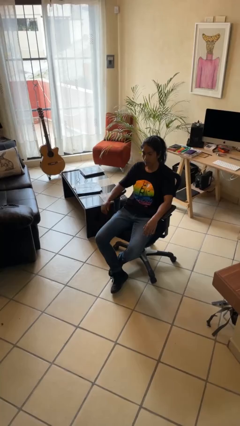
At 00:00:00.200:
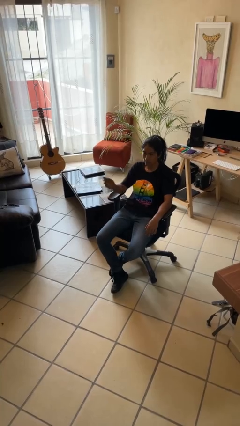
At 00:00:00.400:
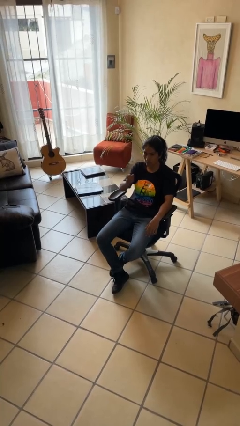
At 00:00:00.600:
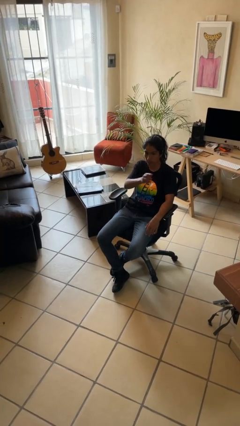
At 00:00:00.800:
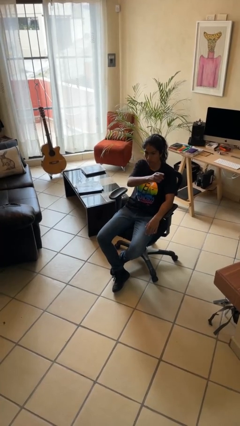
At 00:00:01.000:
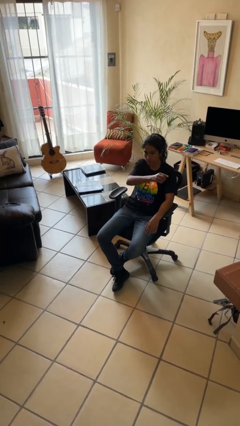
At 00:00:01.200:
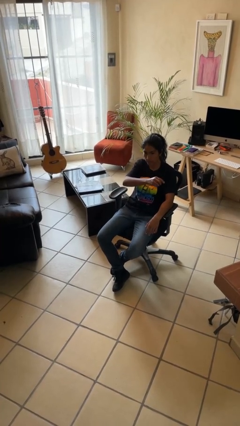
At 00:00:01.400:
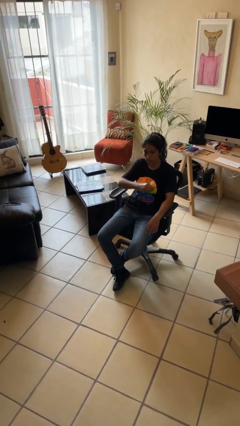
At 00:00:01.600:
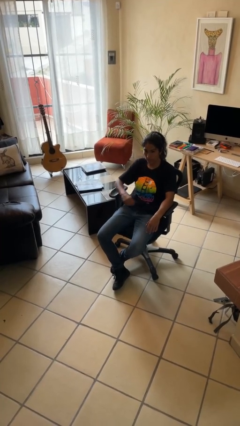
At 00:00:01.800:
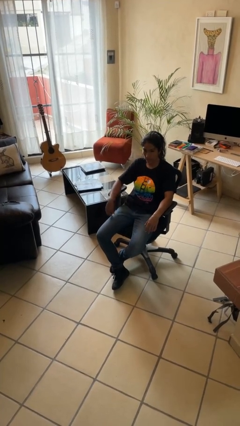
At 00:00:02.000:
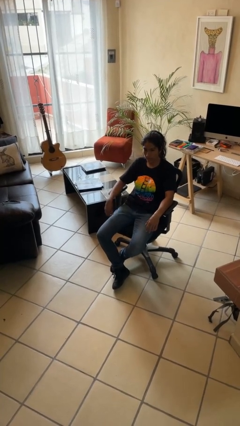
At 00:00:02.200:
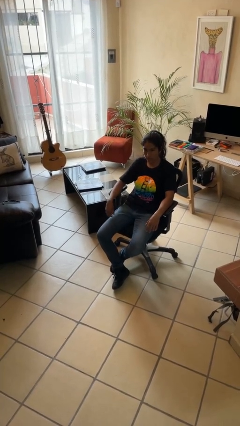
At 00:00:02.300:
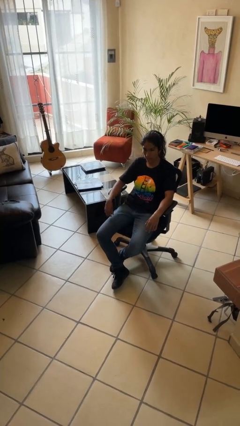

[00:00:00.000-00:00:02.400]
person gestures swipe left

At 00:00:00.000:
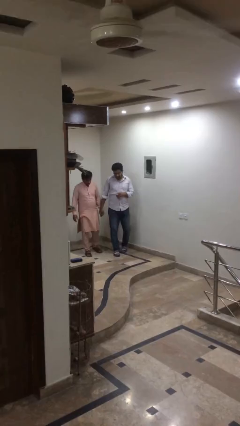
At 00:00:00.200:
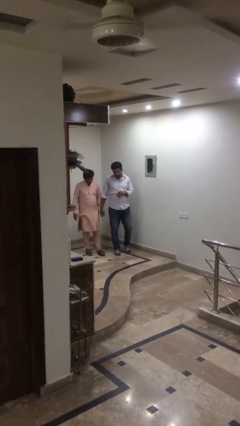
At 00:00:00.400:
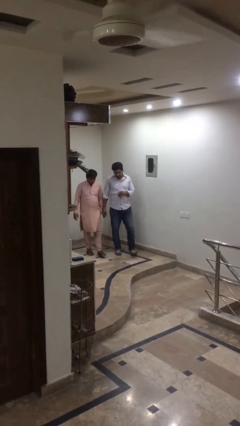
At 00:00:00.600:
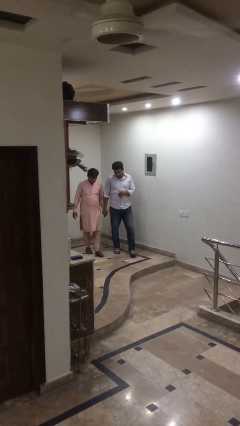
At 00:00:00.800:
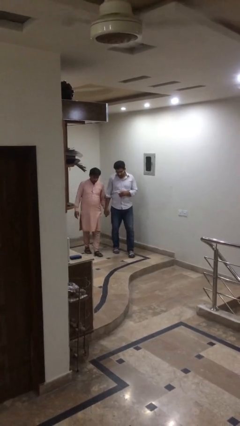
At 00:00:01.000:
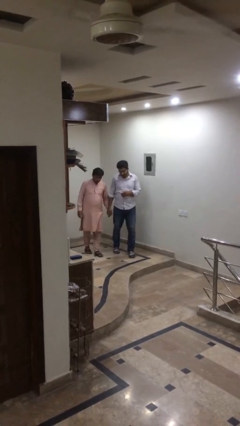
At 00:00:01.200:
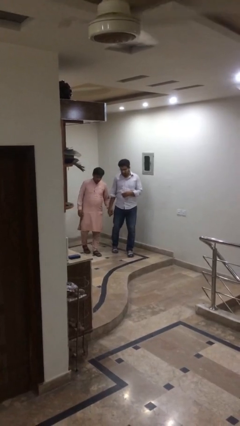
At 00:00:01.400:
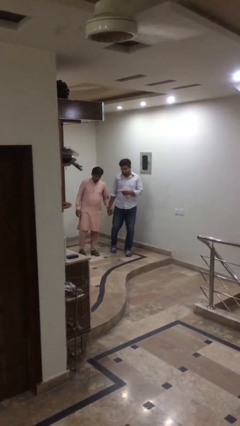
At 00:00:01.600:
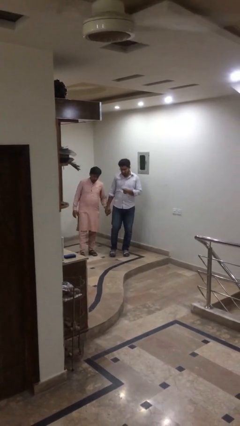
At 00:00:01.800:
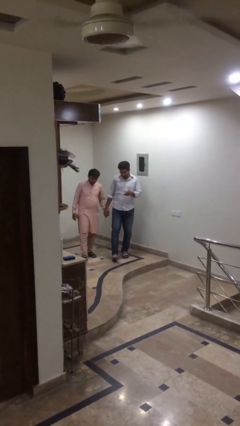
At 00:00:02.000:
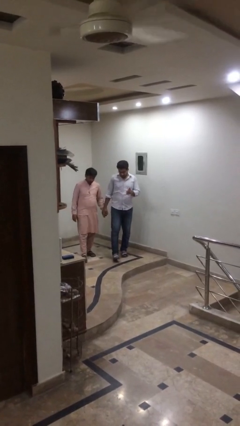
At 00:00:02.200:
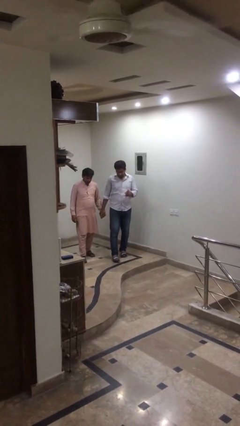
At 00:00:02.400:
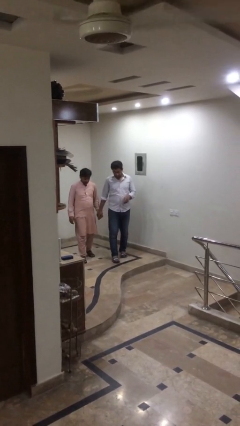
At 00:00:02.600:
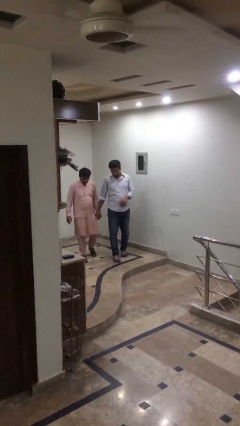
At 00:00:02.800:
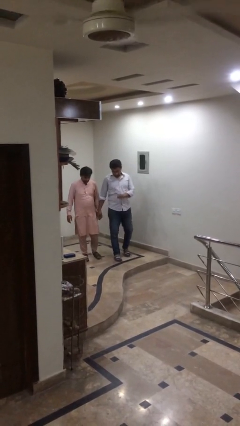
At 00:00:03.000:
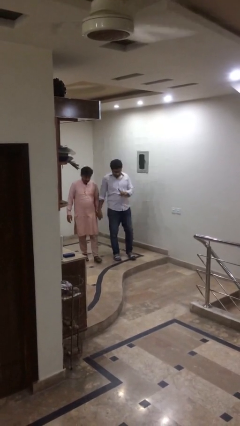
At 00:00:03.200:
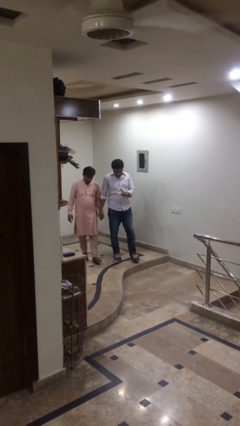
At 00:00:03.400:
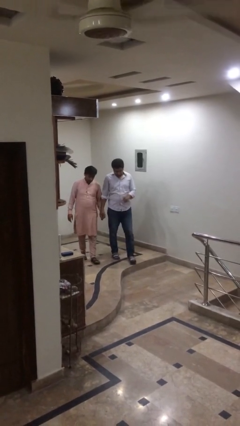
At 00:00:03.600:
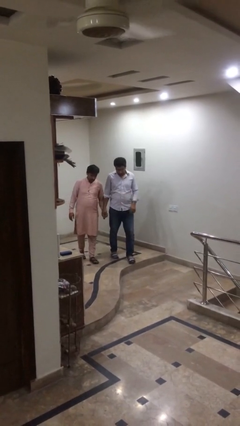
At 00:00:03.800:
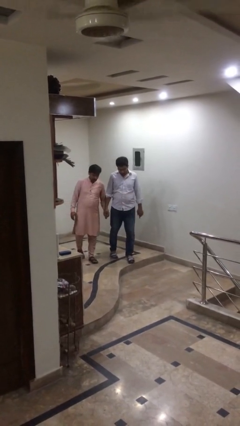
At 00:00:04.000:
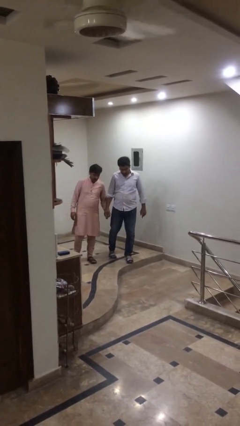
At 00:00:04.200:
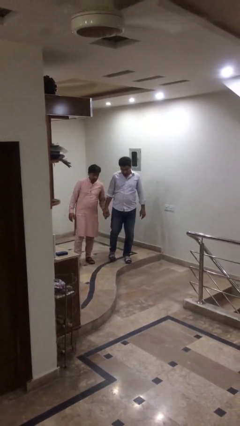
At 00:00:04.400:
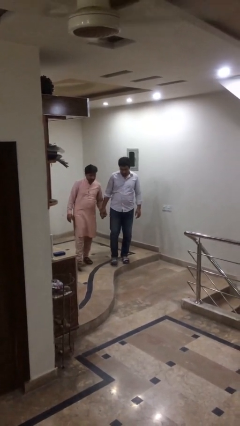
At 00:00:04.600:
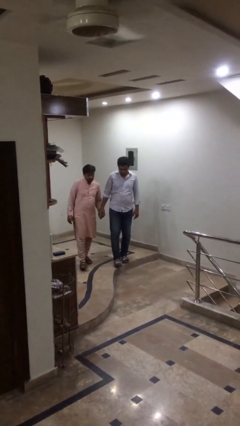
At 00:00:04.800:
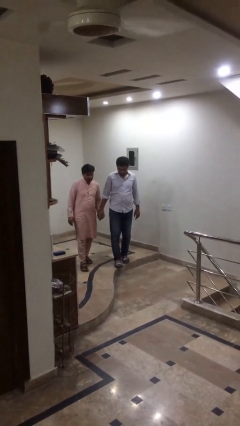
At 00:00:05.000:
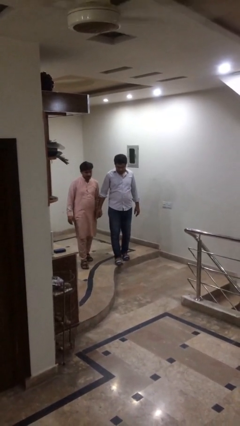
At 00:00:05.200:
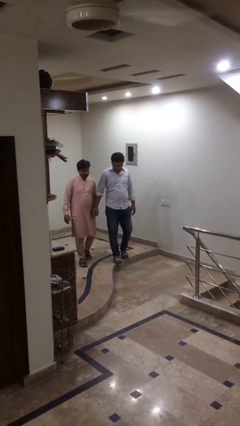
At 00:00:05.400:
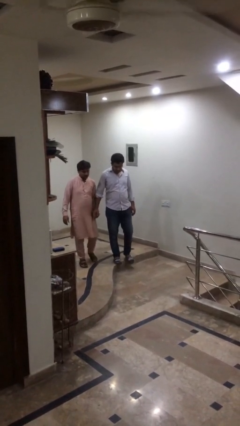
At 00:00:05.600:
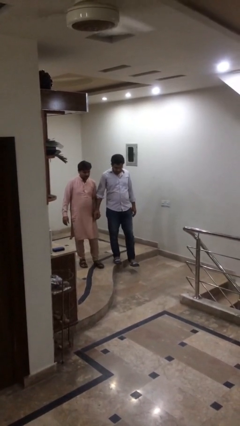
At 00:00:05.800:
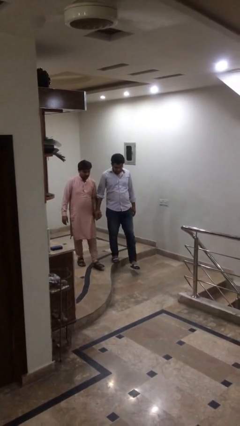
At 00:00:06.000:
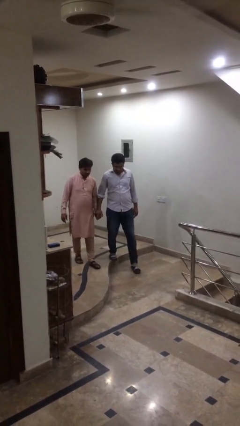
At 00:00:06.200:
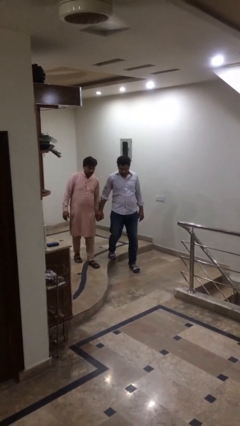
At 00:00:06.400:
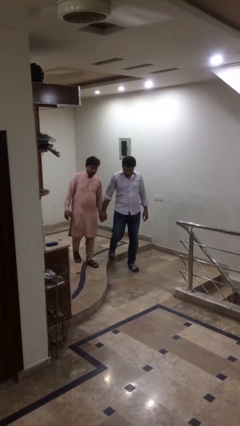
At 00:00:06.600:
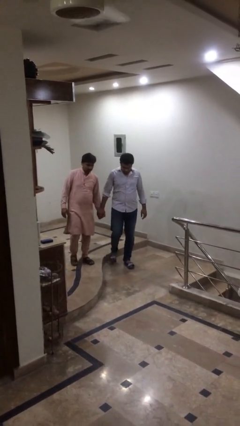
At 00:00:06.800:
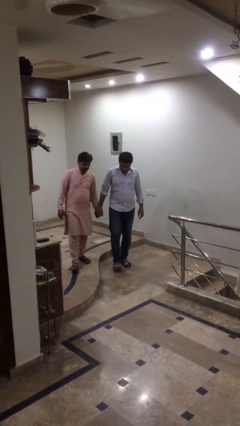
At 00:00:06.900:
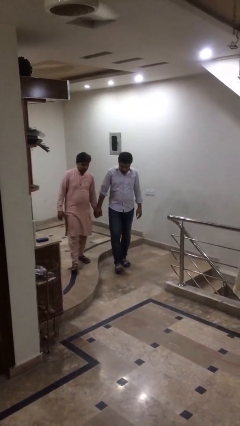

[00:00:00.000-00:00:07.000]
person holds hand

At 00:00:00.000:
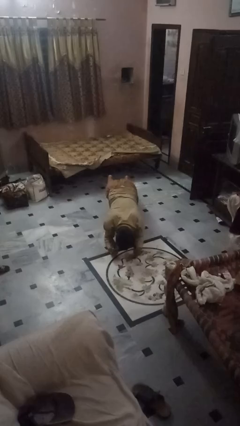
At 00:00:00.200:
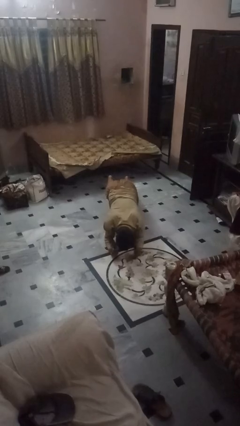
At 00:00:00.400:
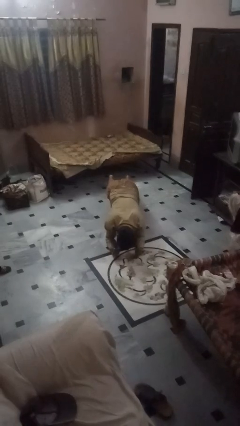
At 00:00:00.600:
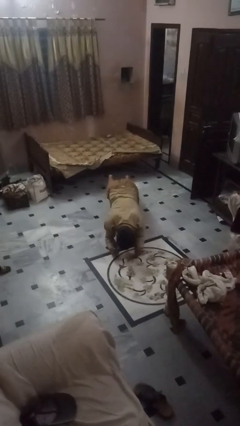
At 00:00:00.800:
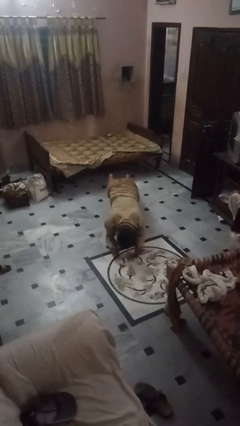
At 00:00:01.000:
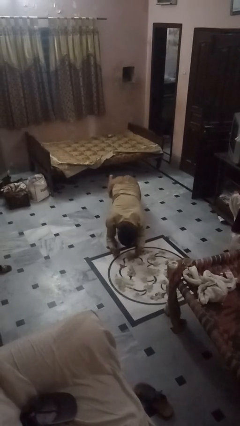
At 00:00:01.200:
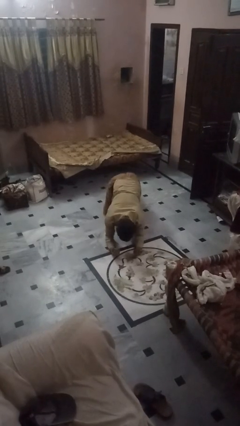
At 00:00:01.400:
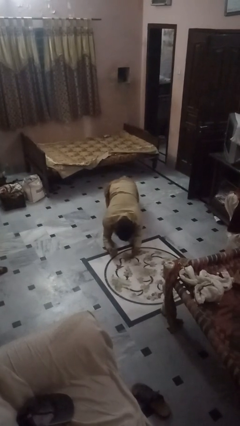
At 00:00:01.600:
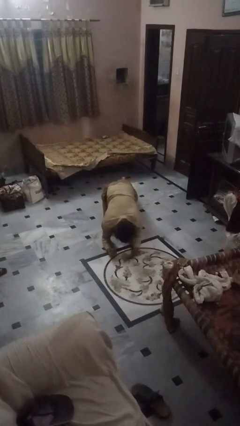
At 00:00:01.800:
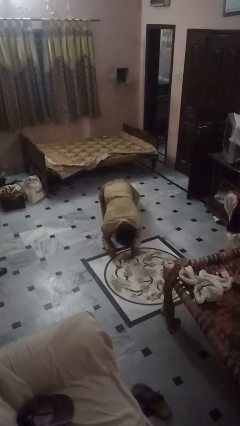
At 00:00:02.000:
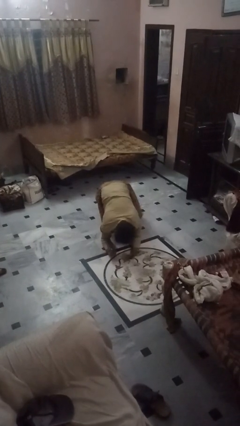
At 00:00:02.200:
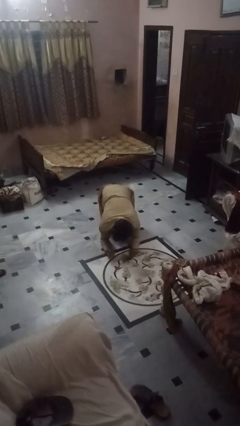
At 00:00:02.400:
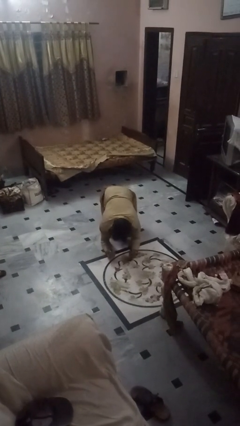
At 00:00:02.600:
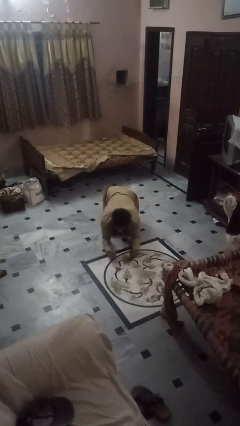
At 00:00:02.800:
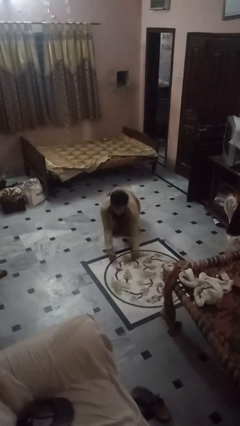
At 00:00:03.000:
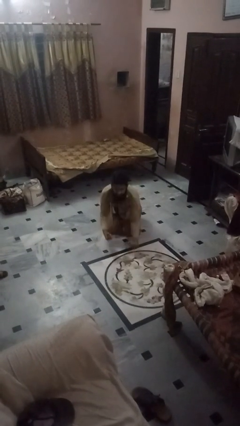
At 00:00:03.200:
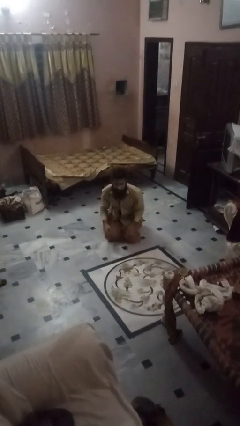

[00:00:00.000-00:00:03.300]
person stands up from floor

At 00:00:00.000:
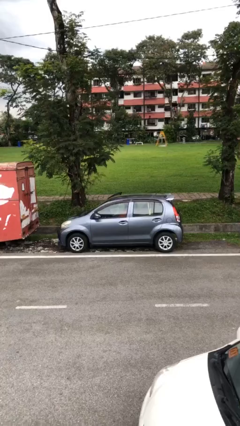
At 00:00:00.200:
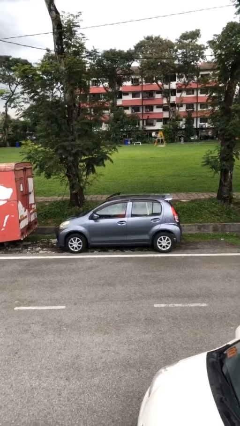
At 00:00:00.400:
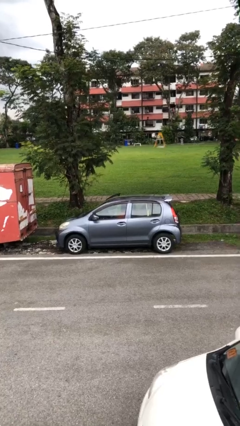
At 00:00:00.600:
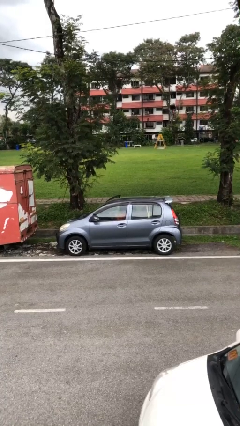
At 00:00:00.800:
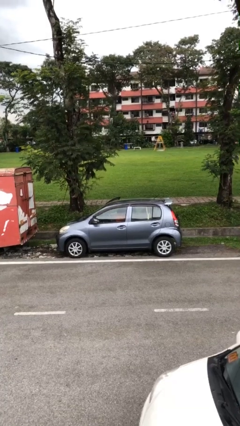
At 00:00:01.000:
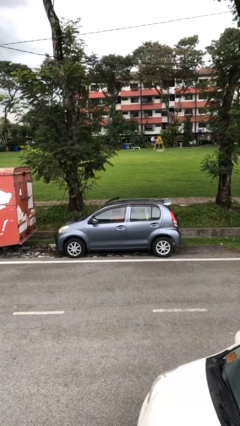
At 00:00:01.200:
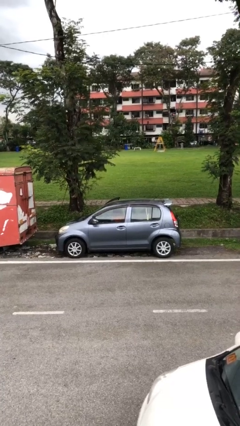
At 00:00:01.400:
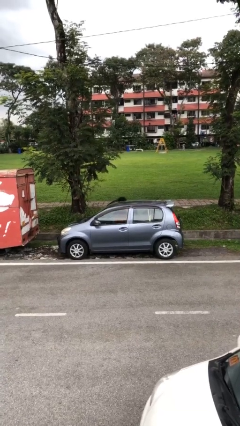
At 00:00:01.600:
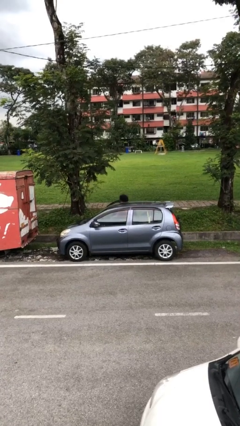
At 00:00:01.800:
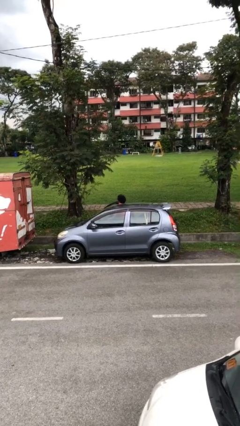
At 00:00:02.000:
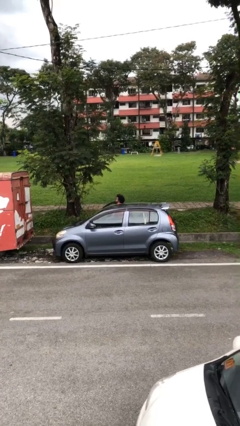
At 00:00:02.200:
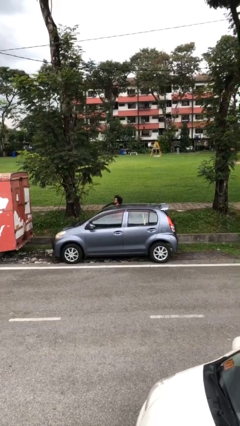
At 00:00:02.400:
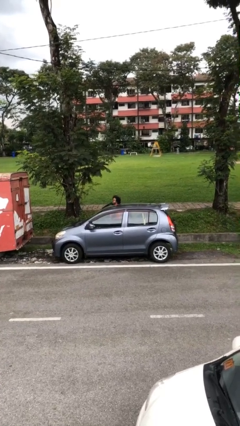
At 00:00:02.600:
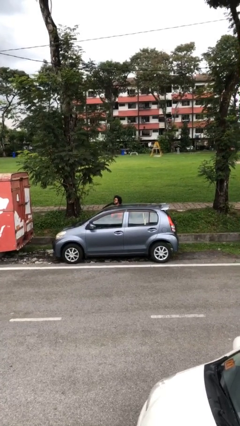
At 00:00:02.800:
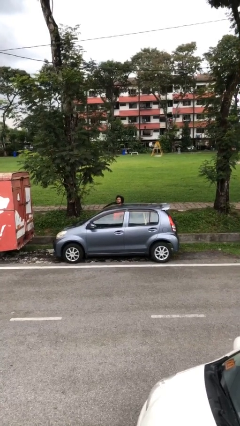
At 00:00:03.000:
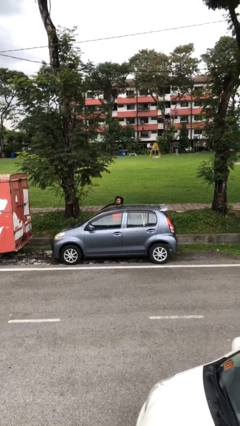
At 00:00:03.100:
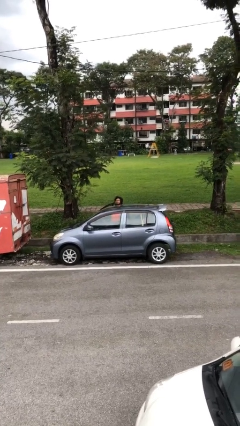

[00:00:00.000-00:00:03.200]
person exits car

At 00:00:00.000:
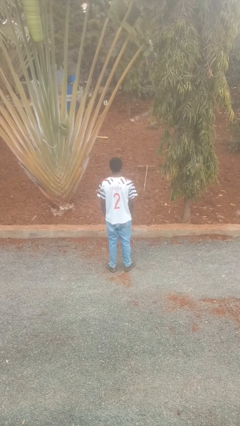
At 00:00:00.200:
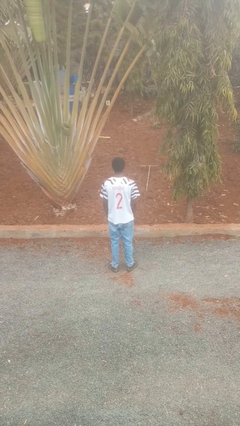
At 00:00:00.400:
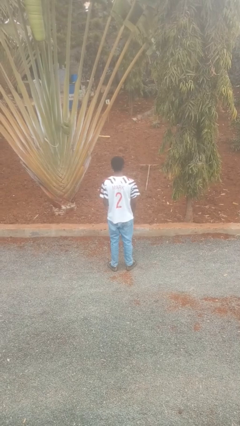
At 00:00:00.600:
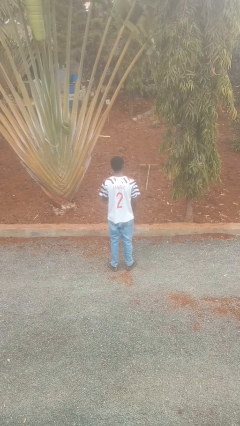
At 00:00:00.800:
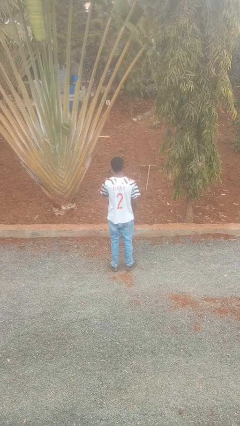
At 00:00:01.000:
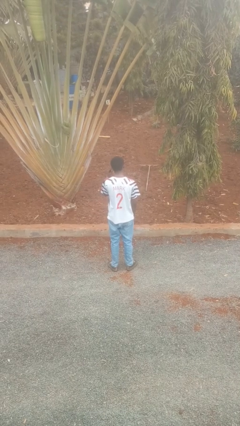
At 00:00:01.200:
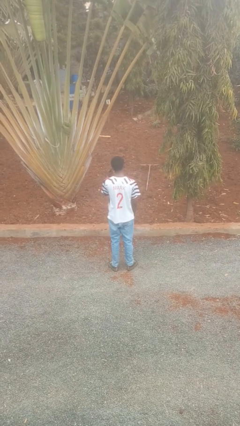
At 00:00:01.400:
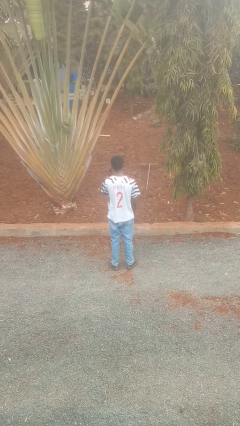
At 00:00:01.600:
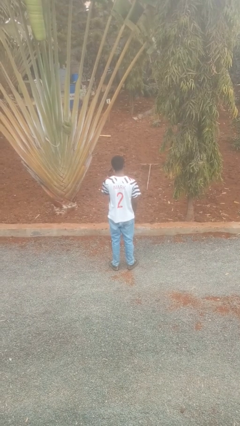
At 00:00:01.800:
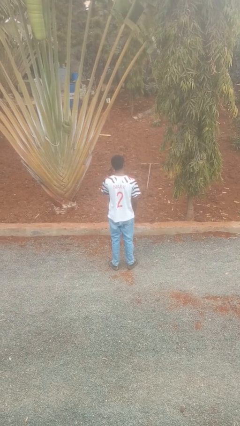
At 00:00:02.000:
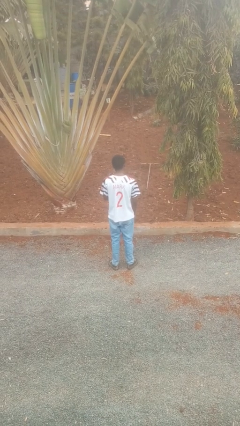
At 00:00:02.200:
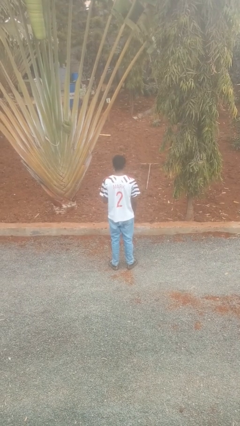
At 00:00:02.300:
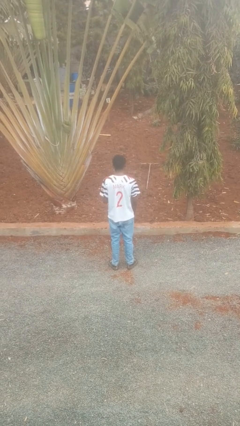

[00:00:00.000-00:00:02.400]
person gestures listen closely
